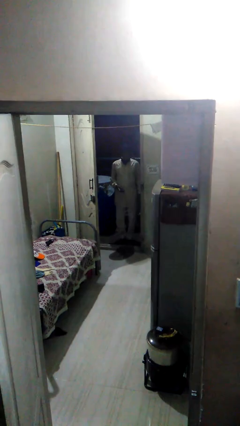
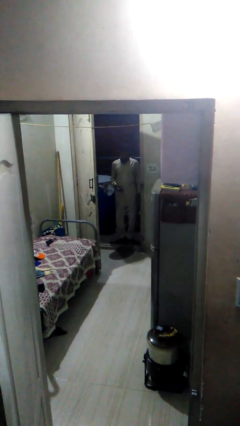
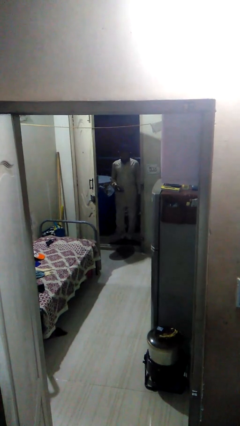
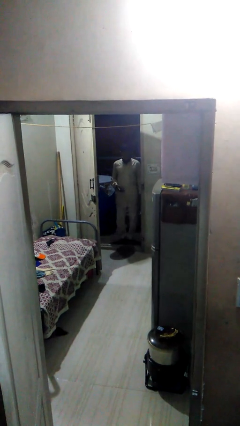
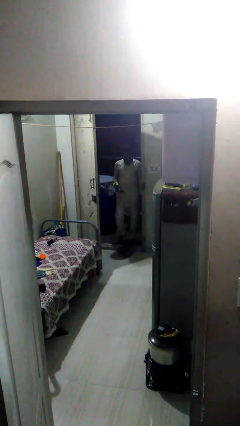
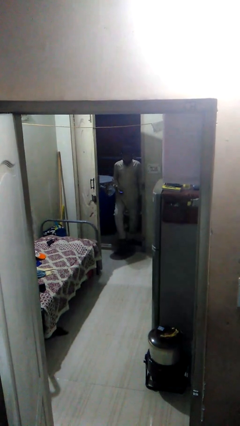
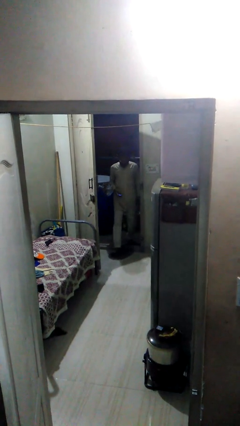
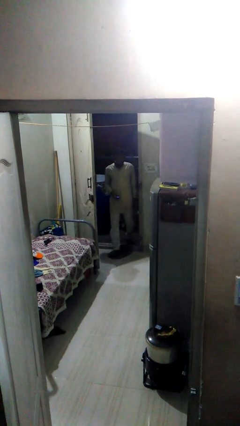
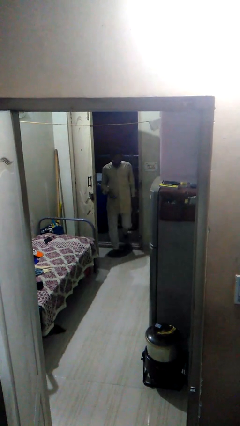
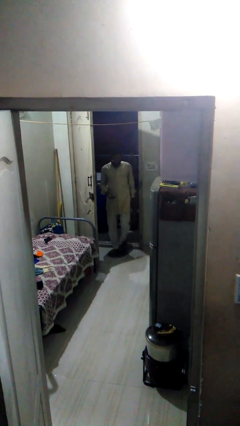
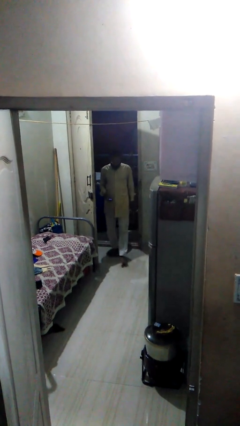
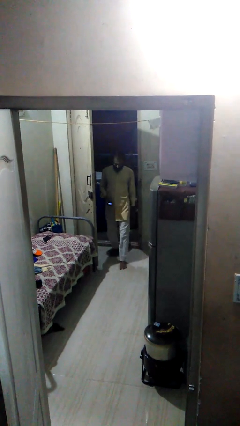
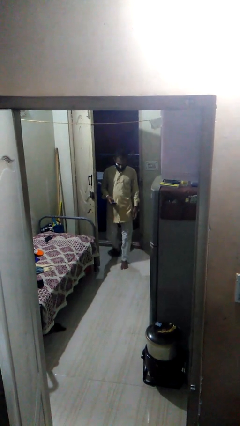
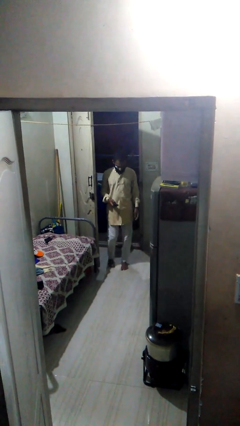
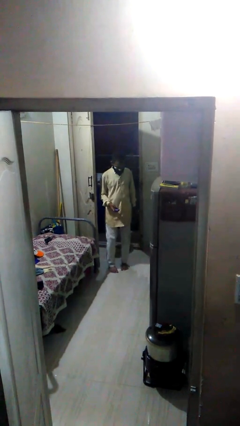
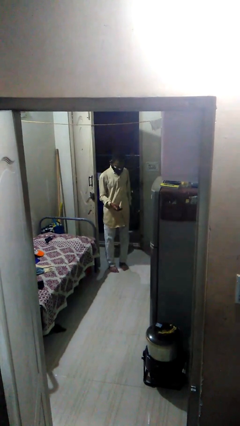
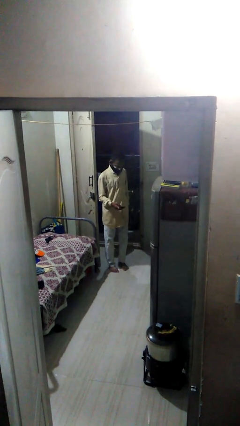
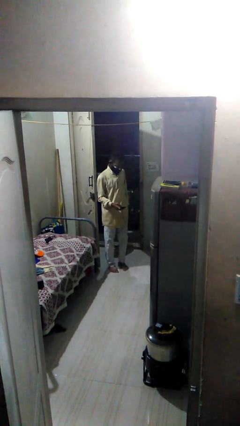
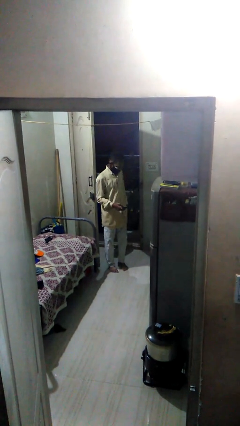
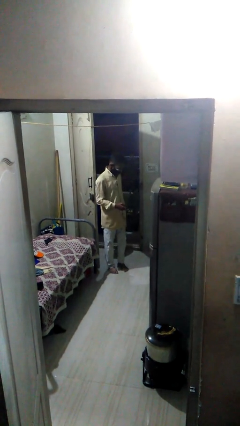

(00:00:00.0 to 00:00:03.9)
person enters scene through structure

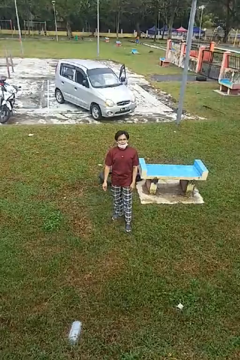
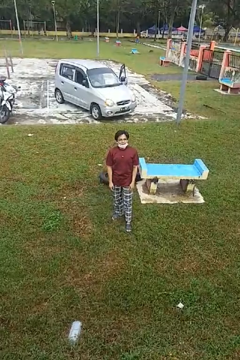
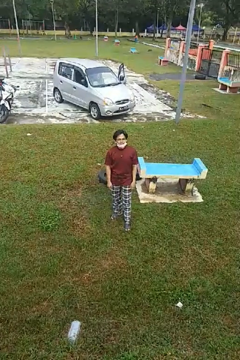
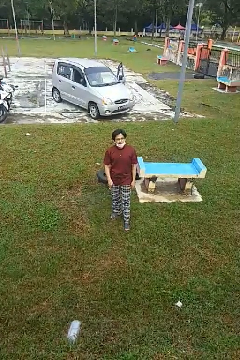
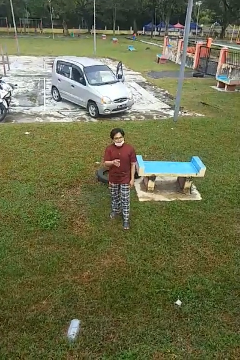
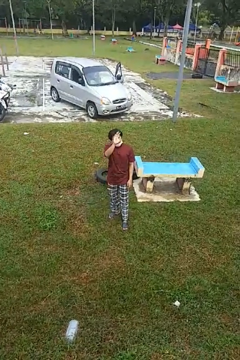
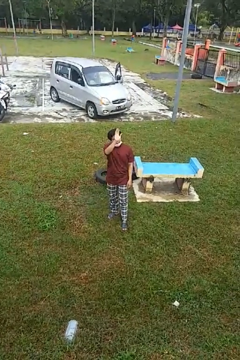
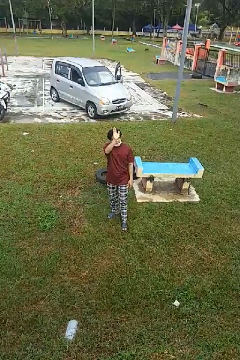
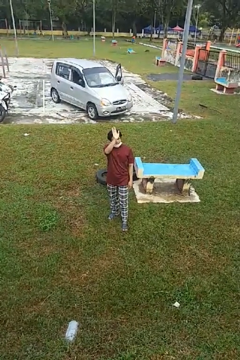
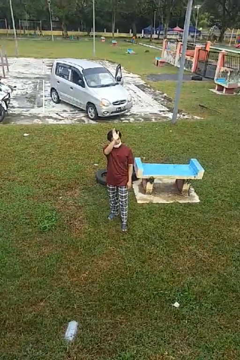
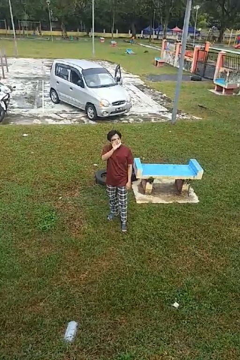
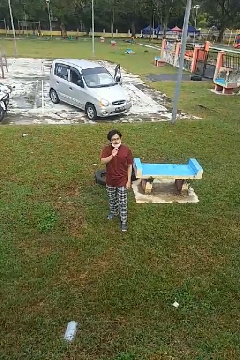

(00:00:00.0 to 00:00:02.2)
person waves at person

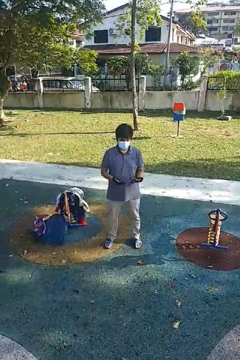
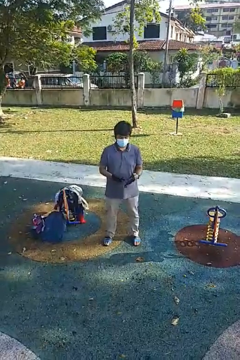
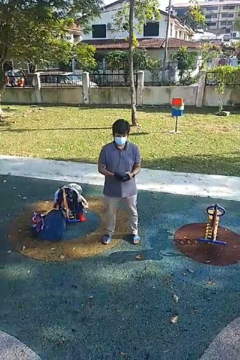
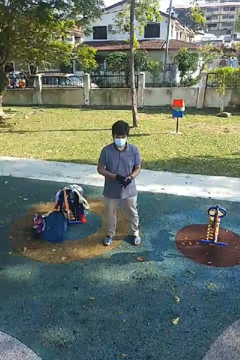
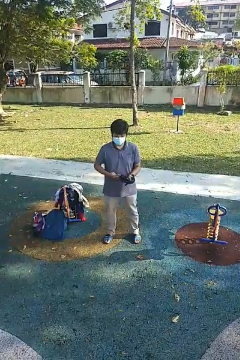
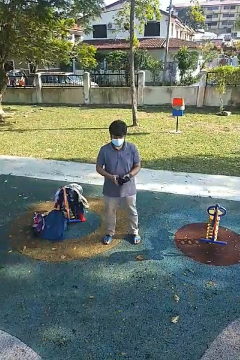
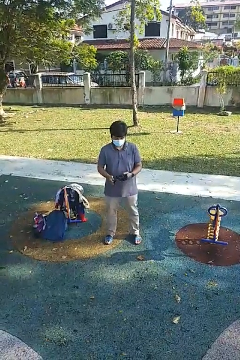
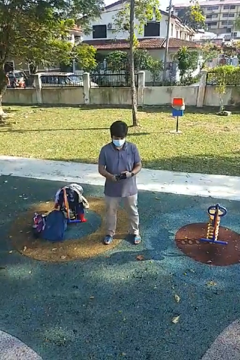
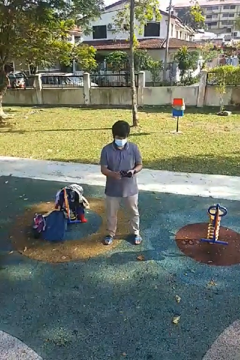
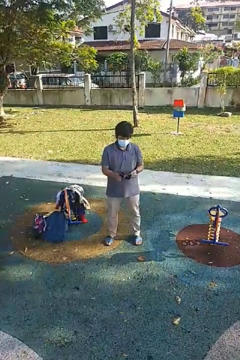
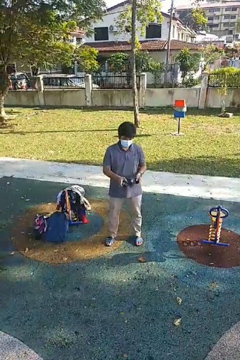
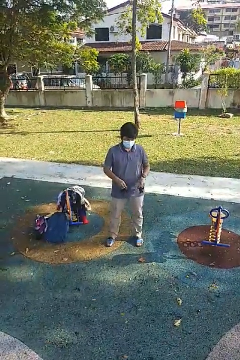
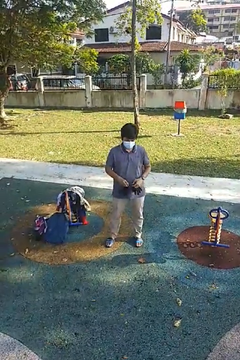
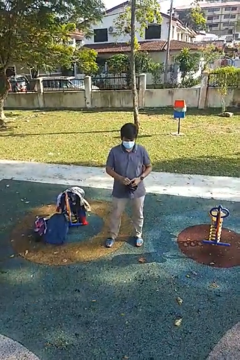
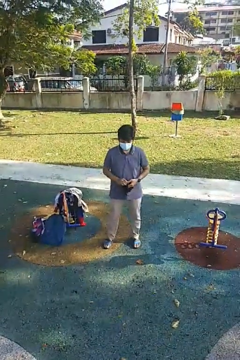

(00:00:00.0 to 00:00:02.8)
person takes off gloves

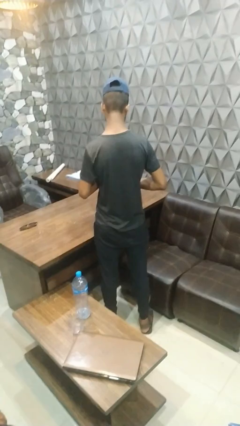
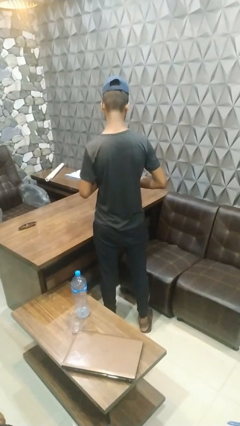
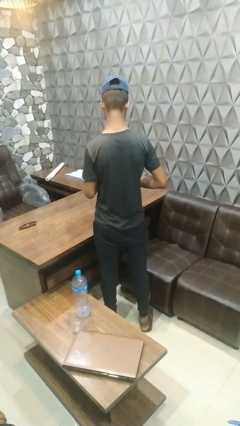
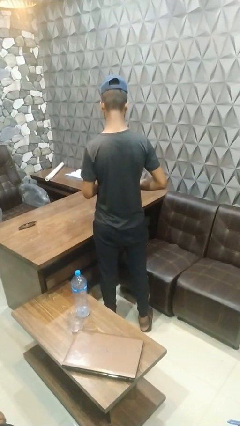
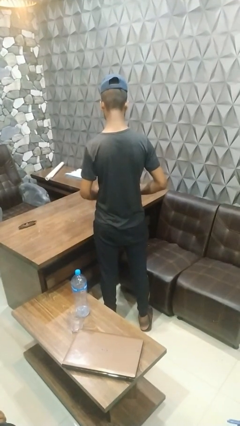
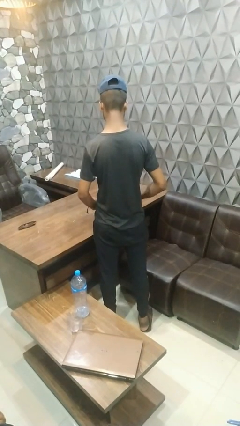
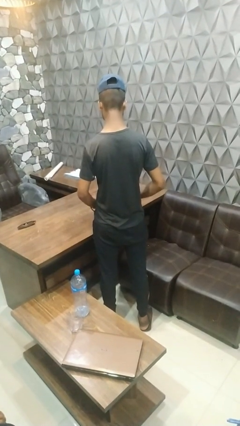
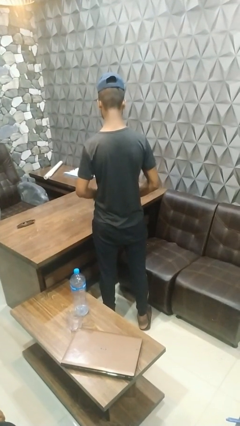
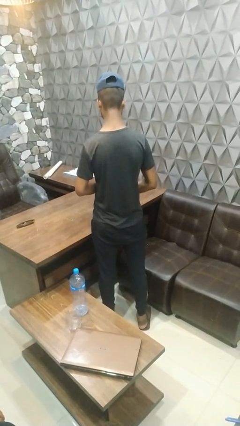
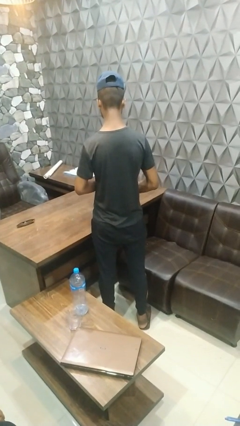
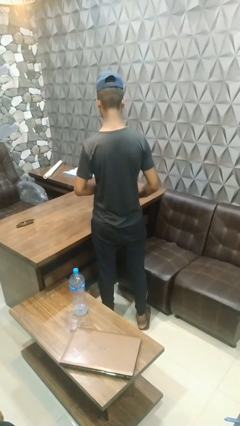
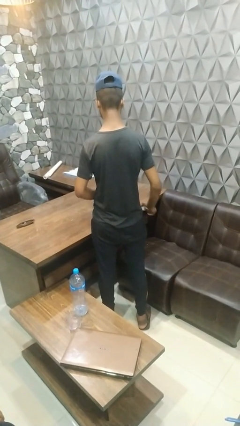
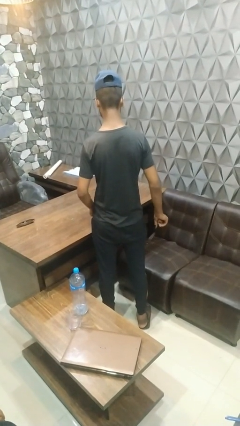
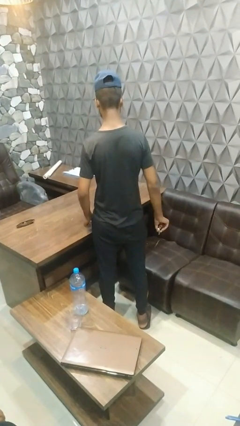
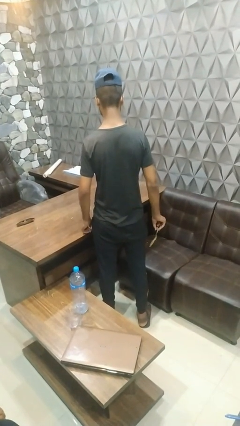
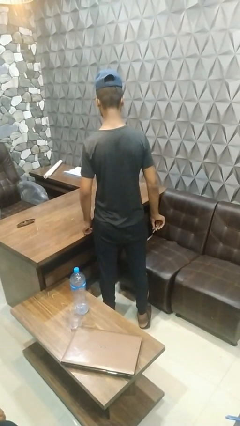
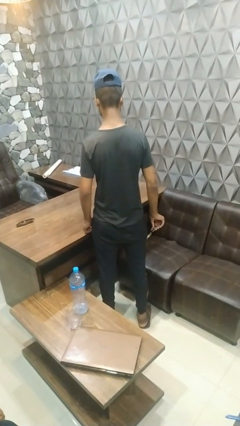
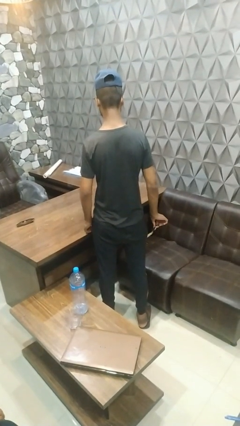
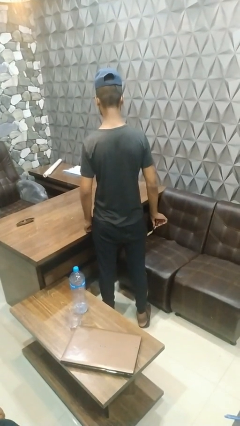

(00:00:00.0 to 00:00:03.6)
person takes off wristwatch

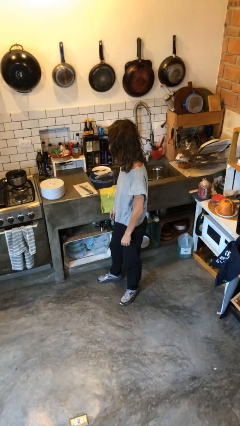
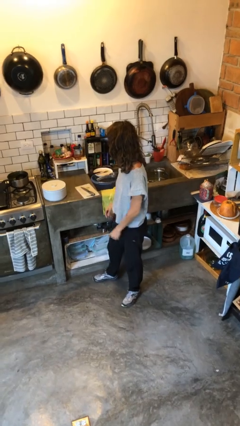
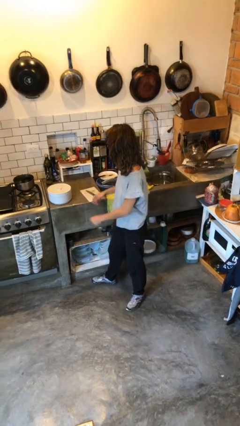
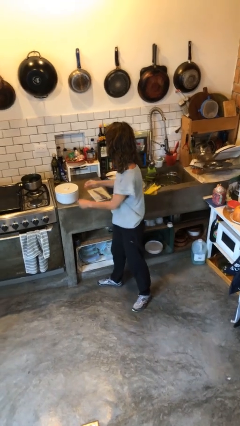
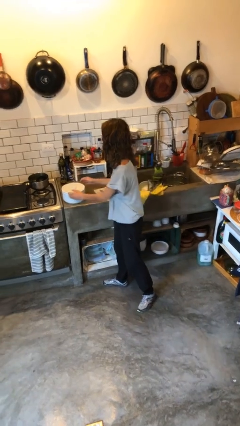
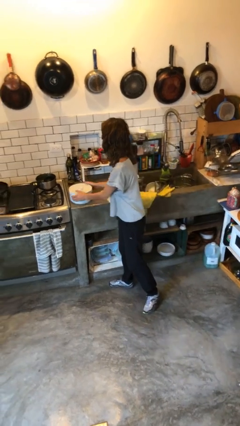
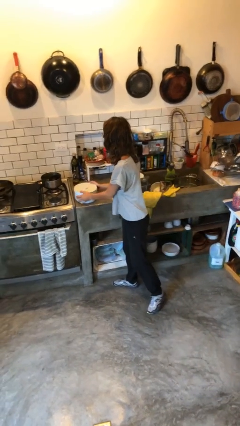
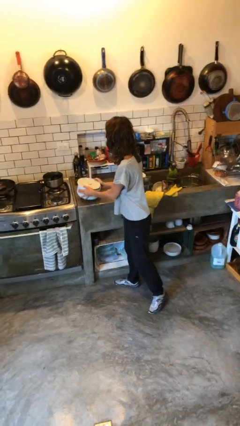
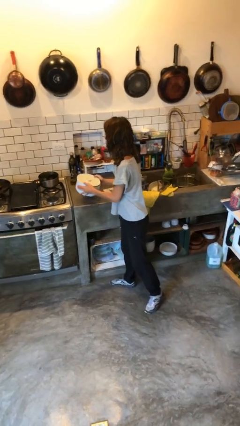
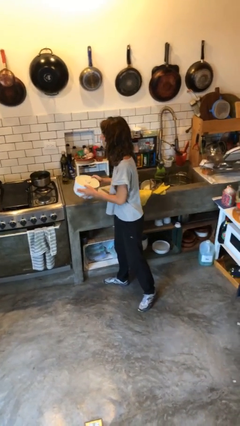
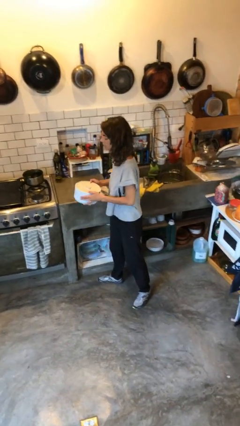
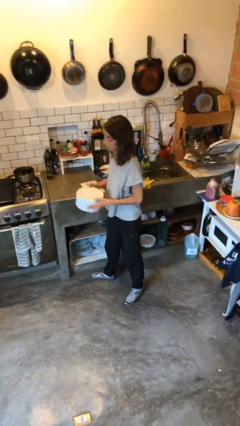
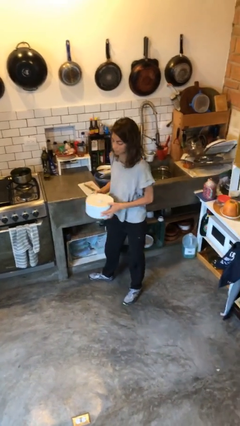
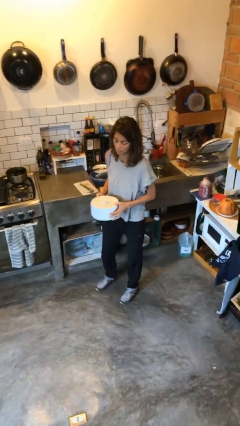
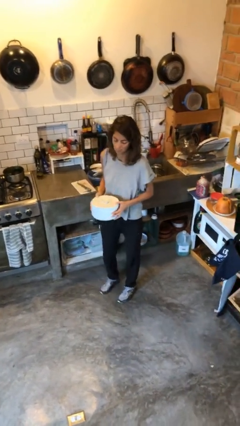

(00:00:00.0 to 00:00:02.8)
person picks up object from countertop

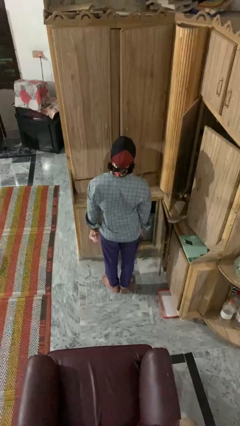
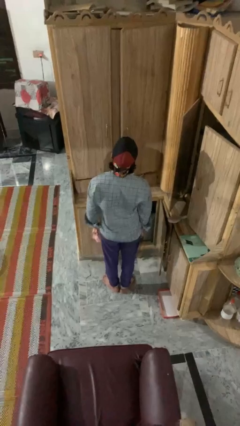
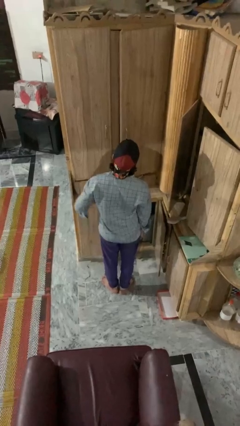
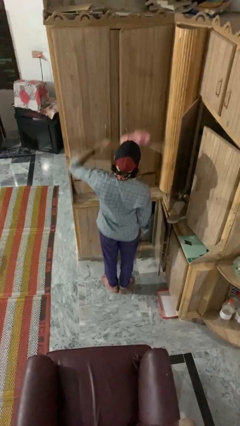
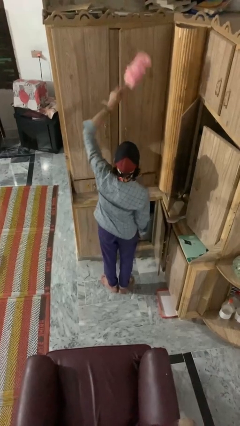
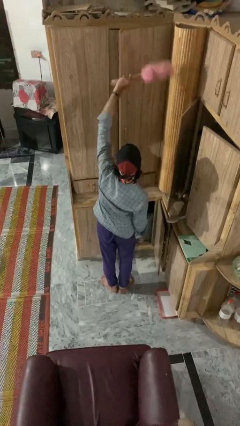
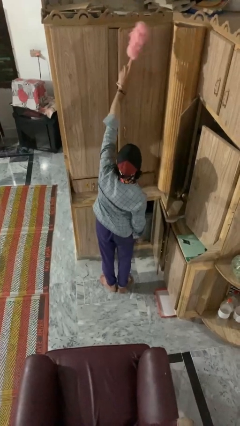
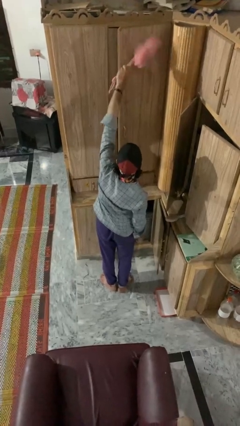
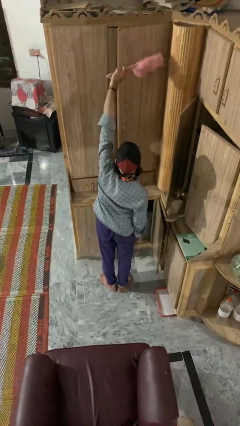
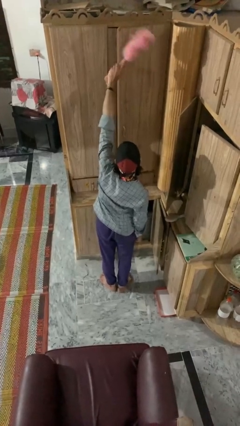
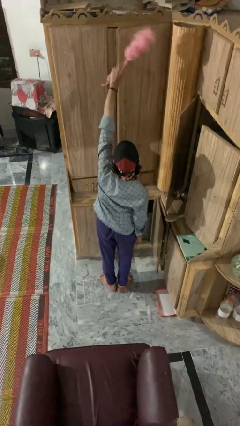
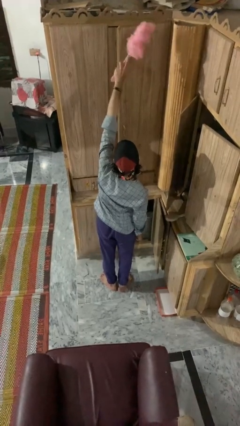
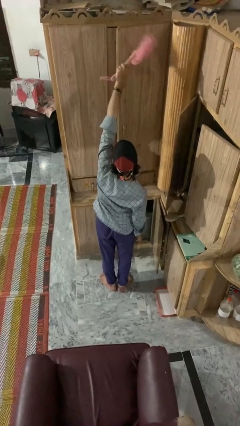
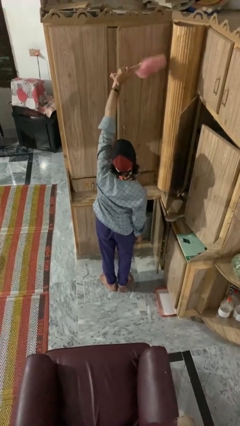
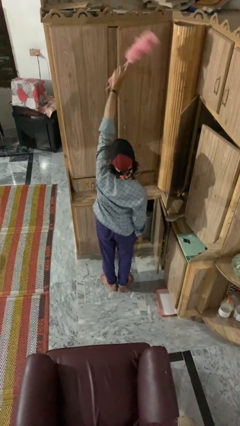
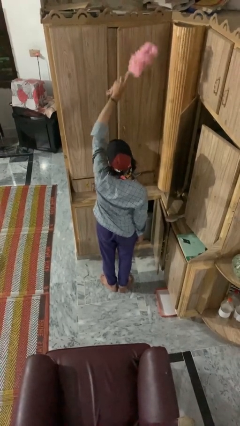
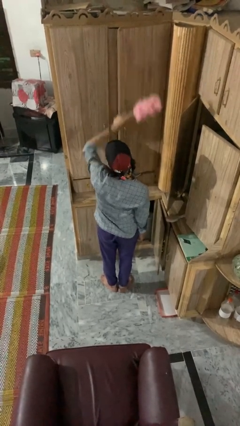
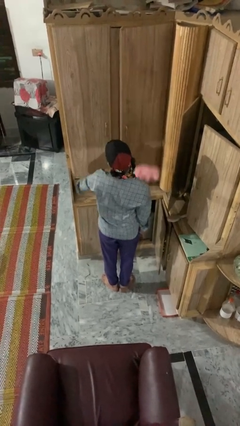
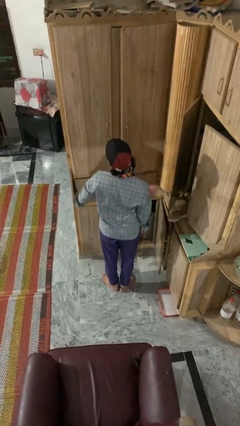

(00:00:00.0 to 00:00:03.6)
person dusts furniture
